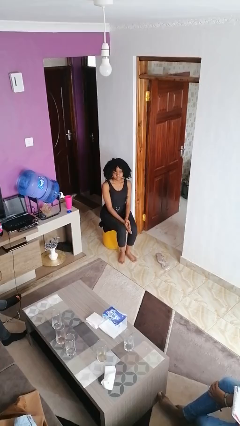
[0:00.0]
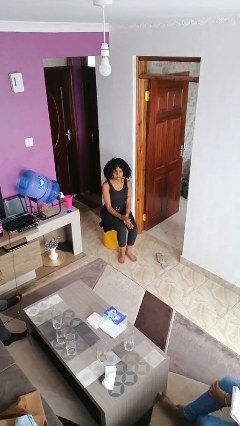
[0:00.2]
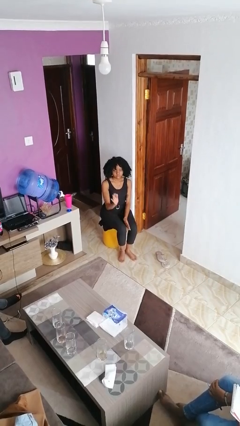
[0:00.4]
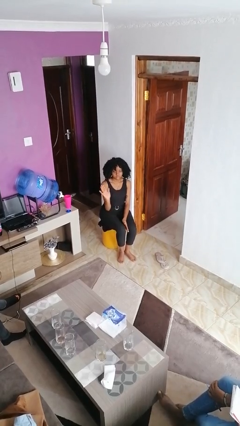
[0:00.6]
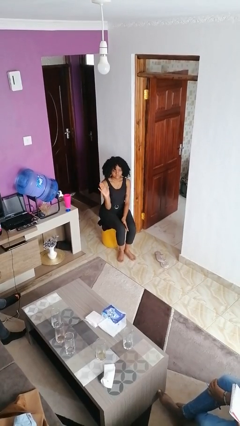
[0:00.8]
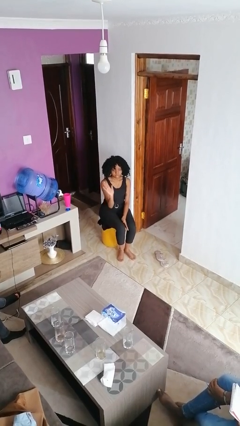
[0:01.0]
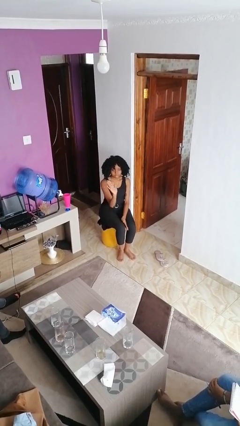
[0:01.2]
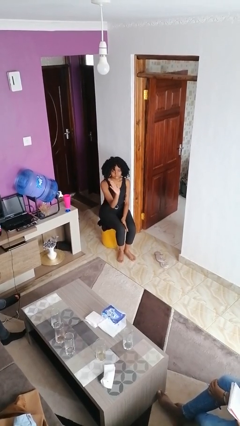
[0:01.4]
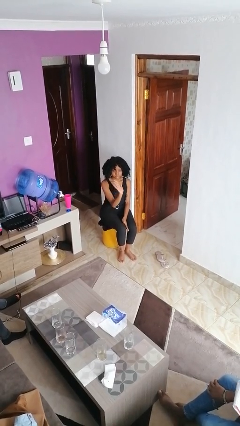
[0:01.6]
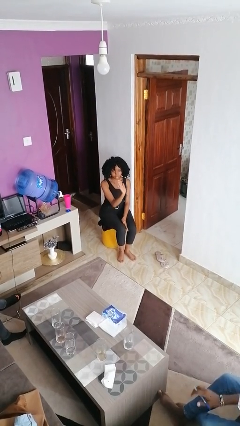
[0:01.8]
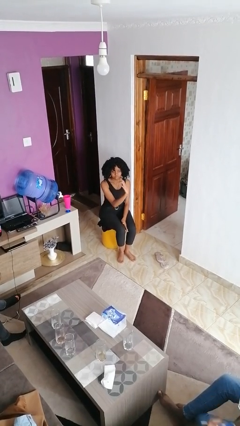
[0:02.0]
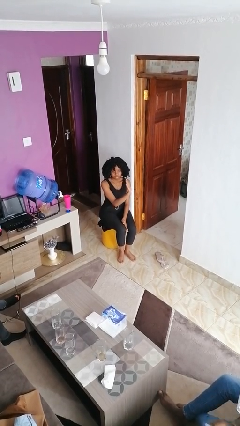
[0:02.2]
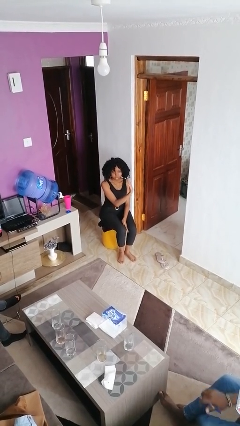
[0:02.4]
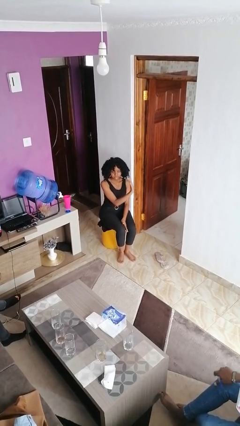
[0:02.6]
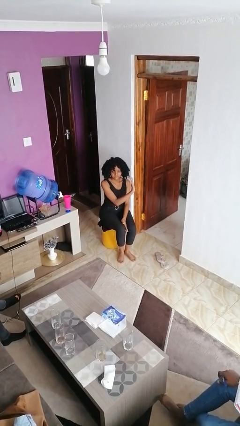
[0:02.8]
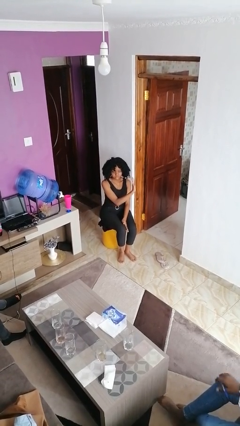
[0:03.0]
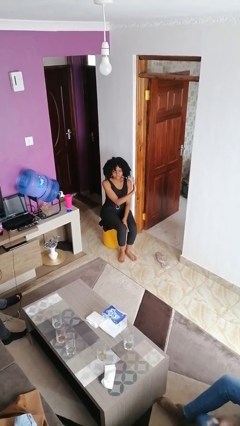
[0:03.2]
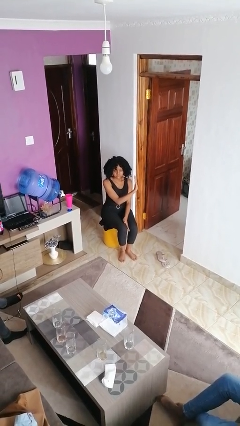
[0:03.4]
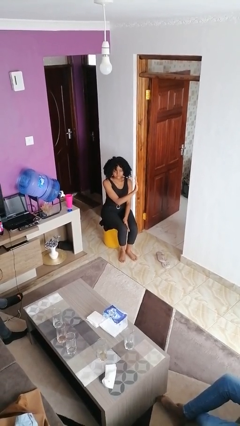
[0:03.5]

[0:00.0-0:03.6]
person gestures swipe left

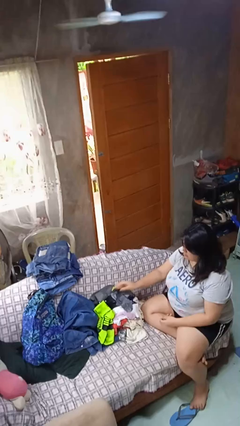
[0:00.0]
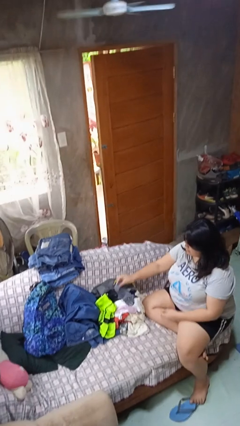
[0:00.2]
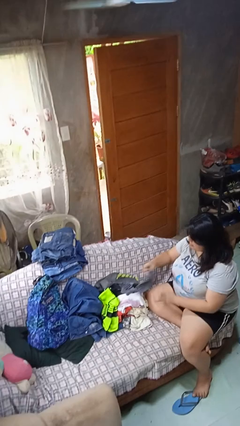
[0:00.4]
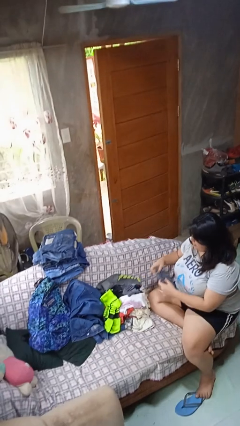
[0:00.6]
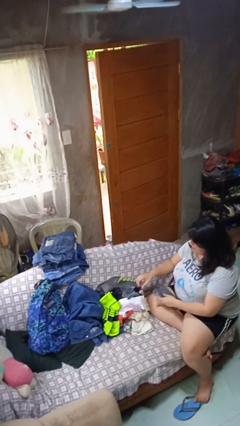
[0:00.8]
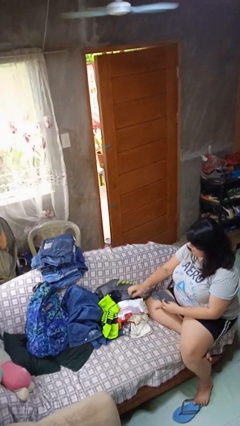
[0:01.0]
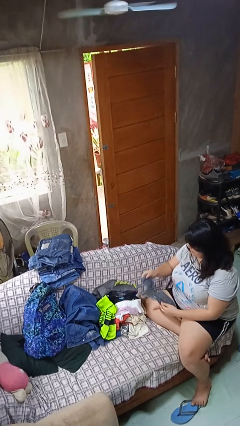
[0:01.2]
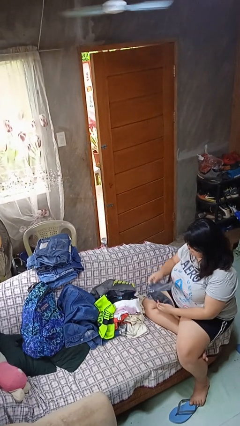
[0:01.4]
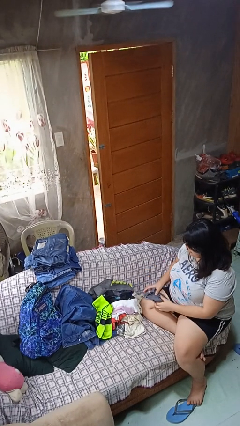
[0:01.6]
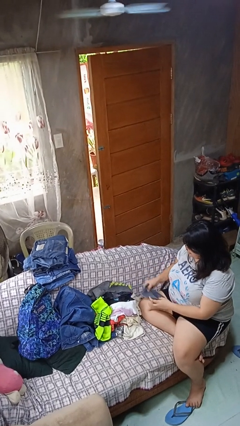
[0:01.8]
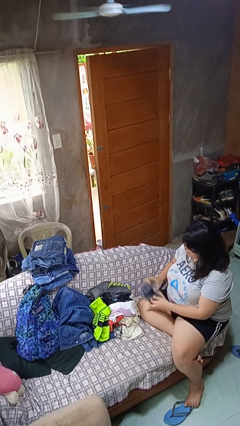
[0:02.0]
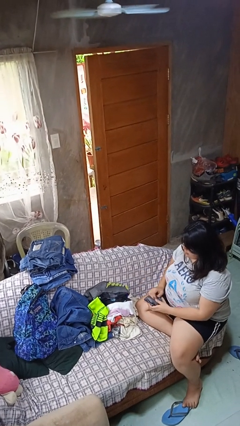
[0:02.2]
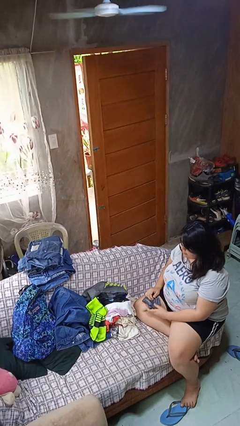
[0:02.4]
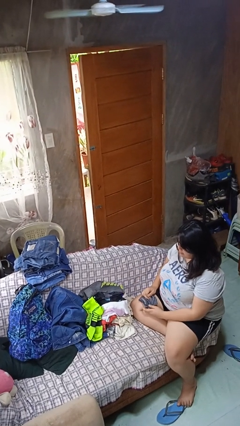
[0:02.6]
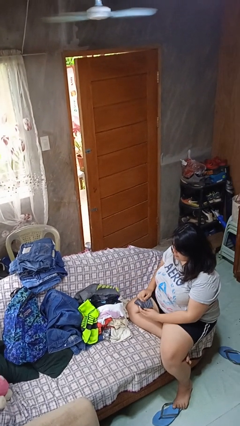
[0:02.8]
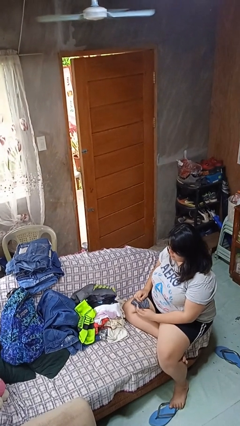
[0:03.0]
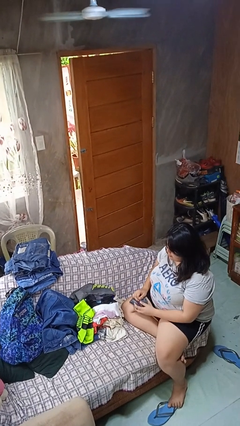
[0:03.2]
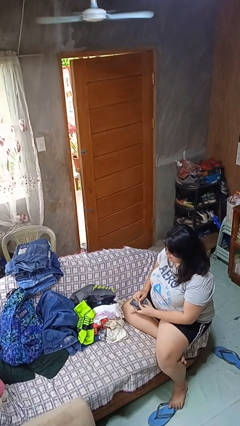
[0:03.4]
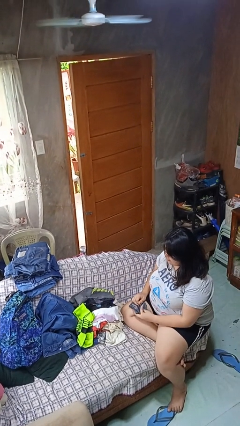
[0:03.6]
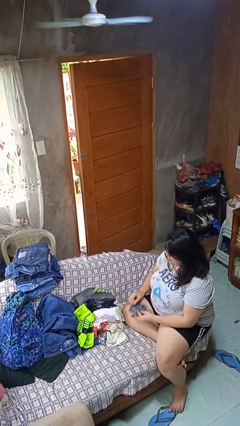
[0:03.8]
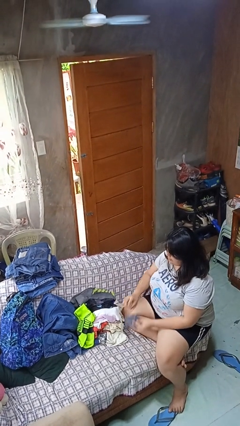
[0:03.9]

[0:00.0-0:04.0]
person folds socks

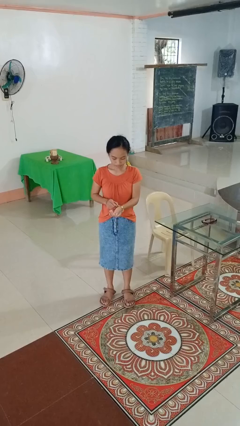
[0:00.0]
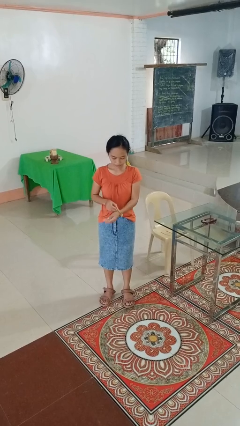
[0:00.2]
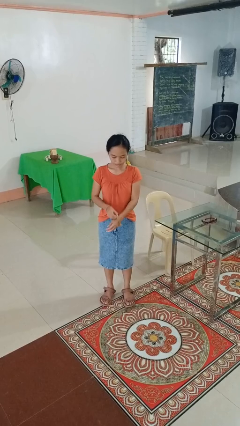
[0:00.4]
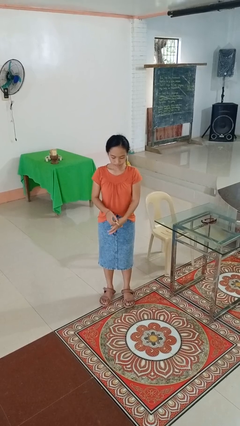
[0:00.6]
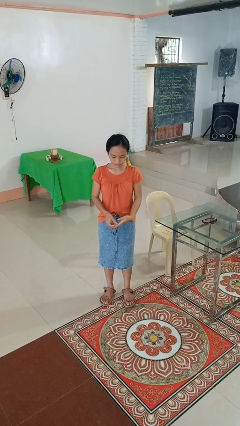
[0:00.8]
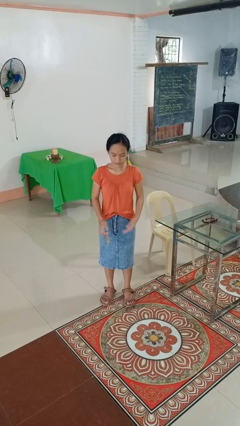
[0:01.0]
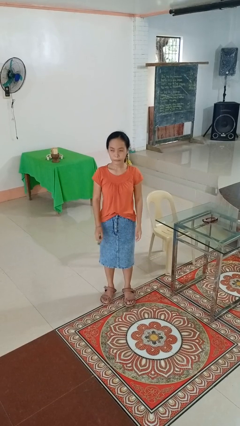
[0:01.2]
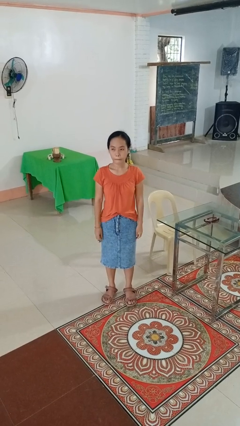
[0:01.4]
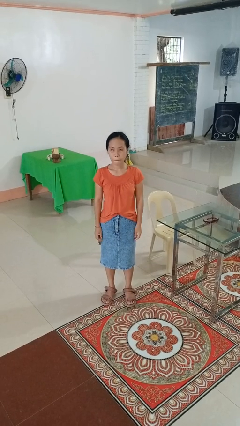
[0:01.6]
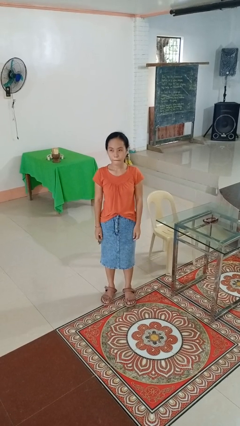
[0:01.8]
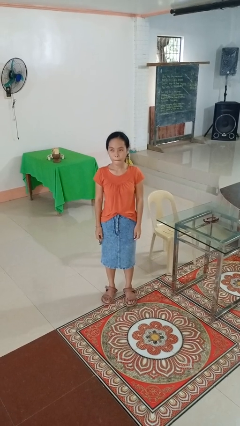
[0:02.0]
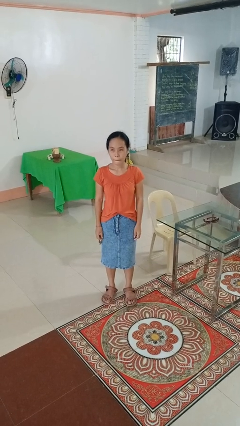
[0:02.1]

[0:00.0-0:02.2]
person takes off wristwatch

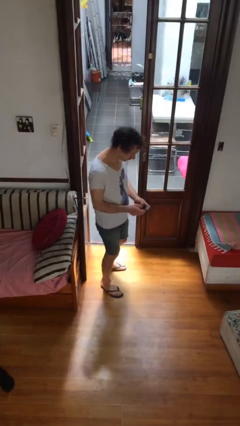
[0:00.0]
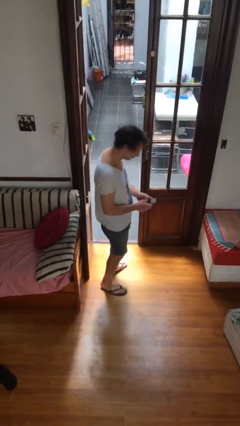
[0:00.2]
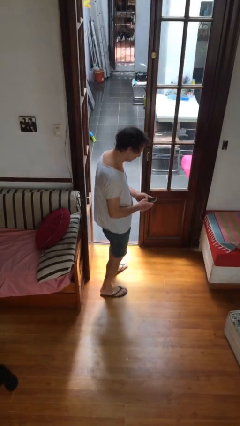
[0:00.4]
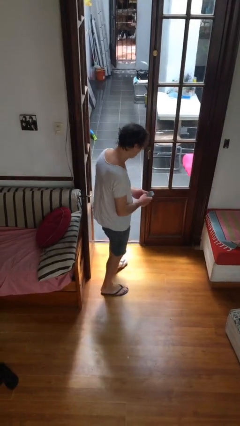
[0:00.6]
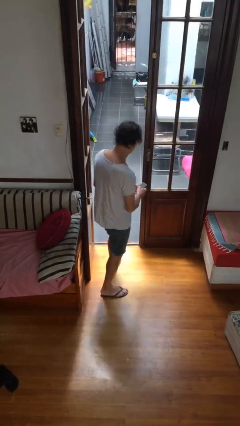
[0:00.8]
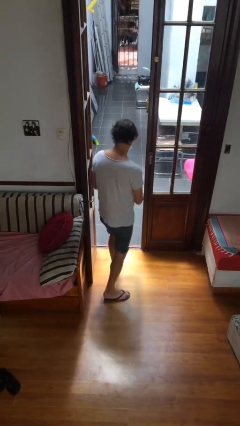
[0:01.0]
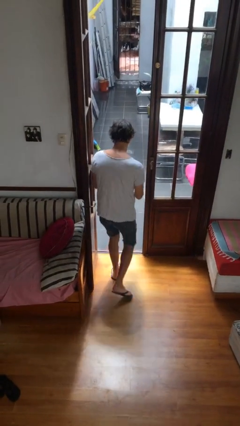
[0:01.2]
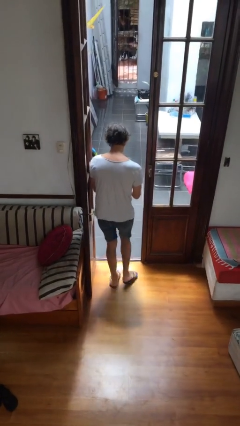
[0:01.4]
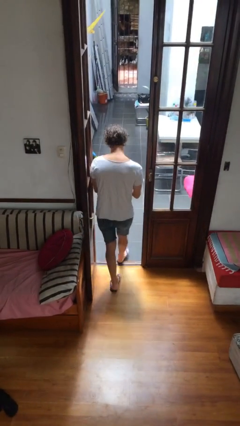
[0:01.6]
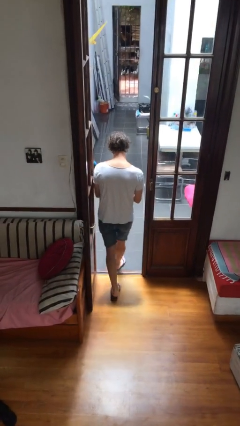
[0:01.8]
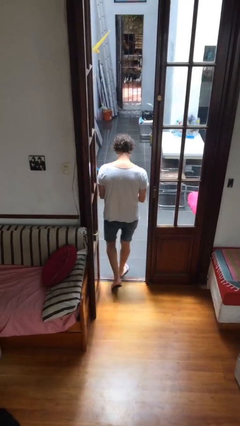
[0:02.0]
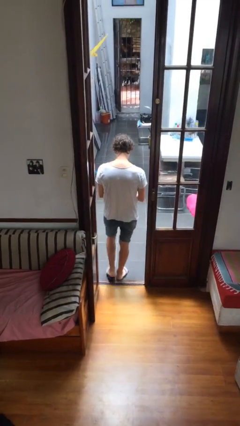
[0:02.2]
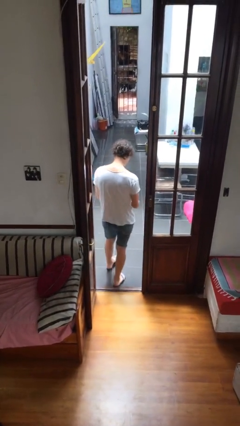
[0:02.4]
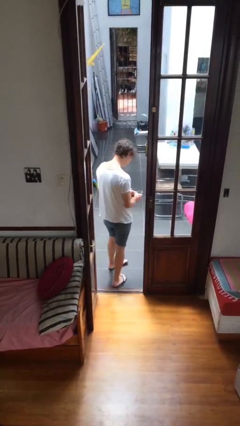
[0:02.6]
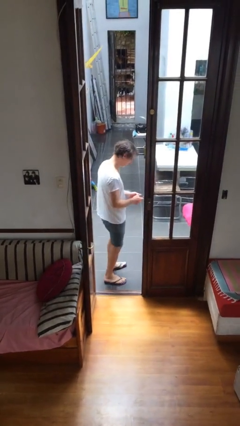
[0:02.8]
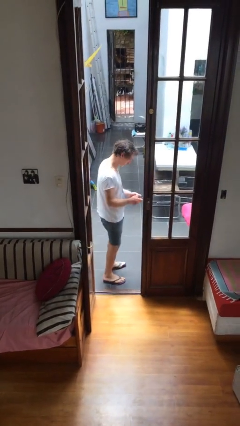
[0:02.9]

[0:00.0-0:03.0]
person exits scene through structure

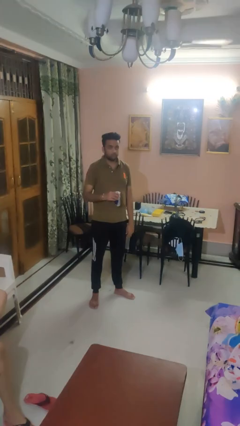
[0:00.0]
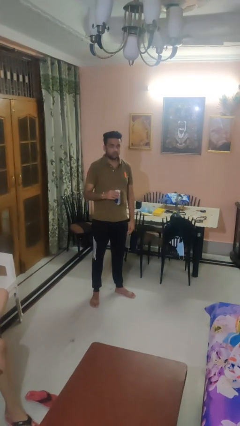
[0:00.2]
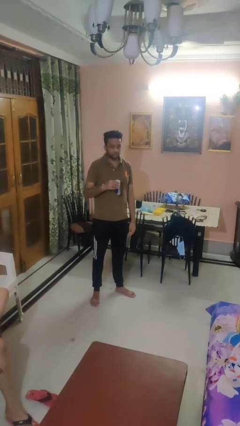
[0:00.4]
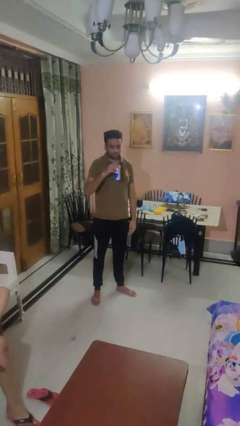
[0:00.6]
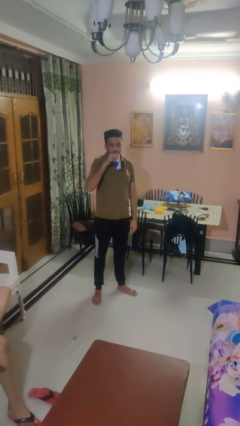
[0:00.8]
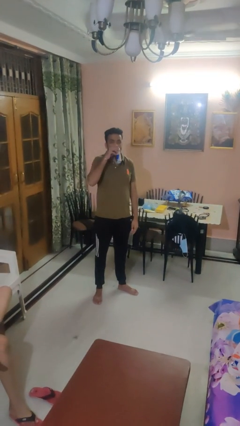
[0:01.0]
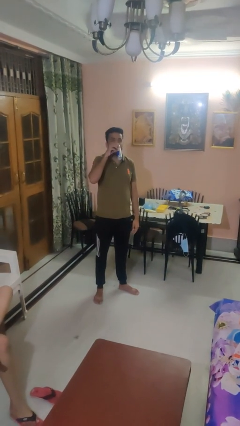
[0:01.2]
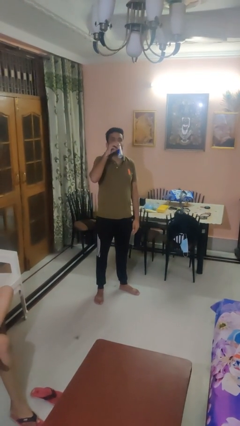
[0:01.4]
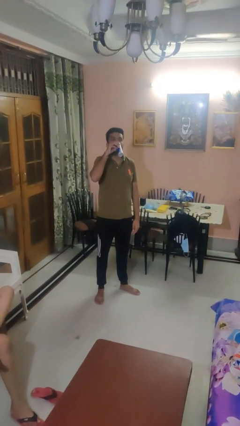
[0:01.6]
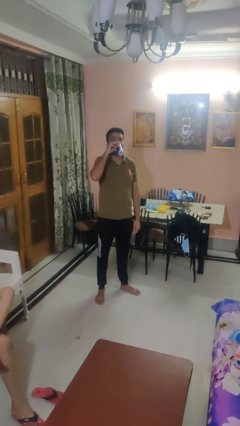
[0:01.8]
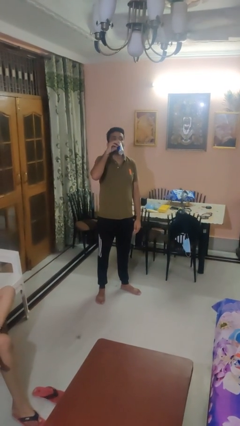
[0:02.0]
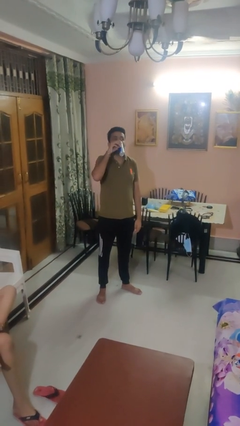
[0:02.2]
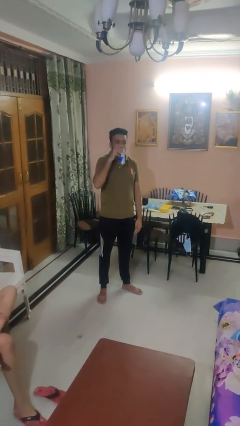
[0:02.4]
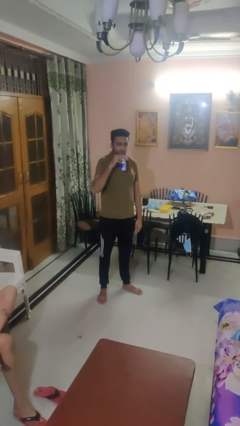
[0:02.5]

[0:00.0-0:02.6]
person drinks from beverage can

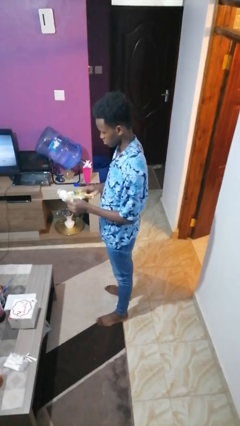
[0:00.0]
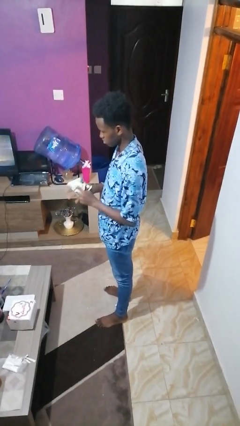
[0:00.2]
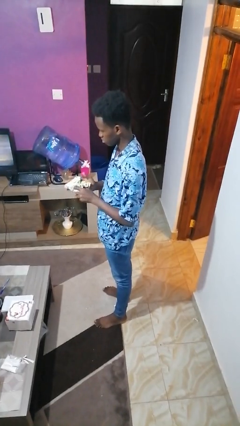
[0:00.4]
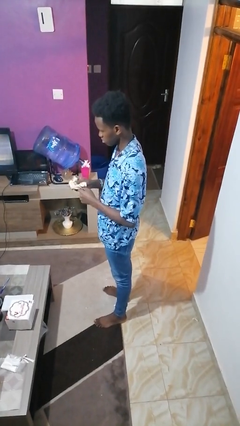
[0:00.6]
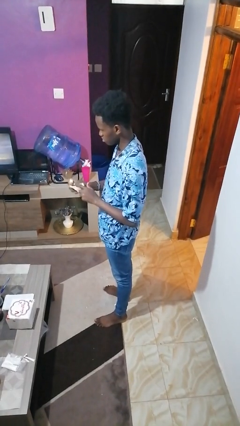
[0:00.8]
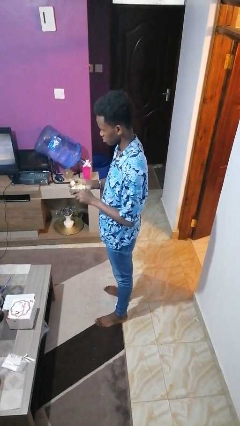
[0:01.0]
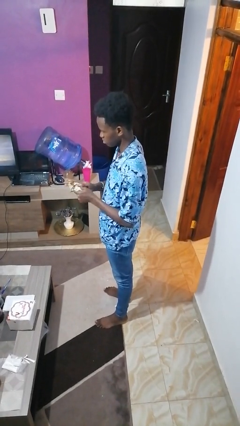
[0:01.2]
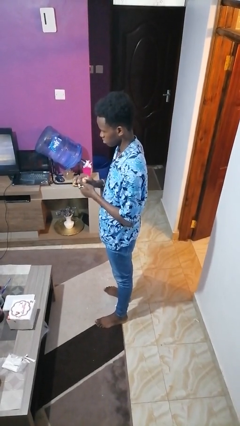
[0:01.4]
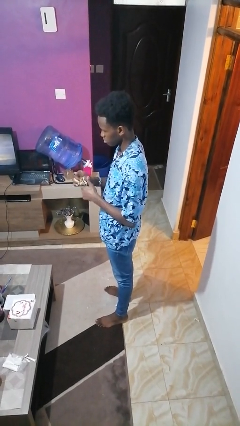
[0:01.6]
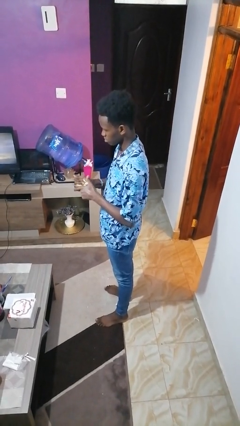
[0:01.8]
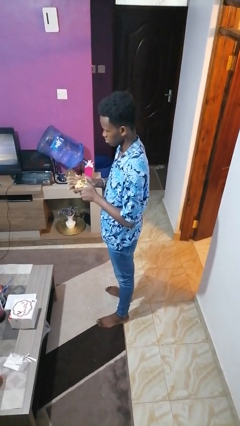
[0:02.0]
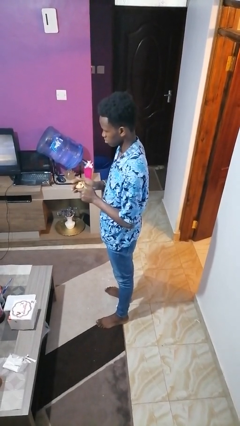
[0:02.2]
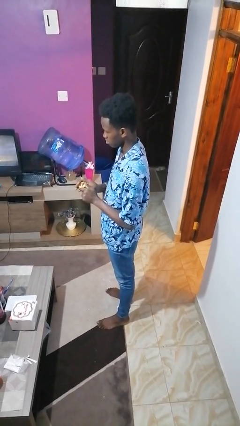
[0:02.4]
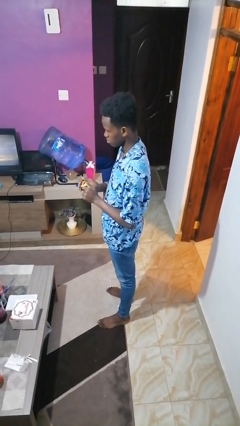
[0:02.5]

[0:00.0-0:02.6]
person crumples paper
